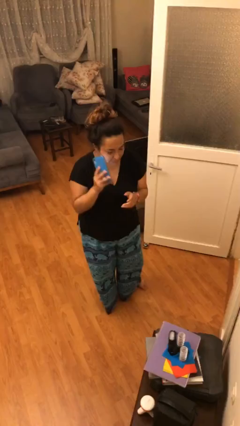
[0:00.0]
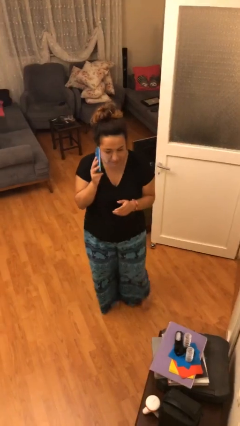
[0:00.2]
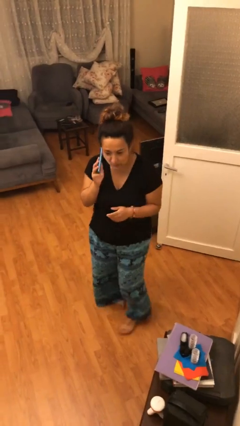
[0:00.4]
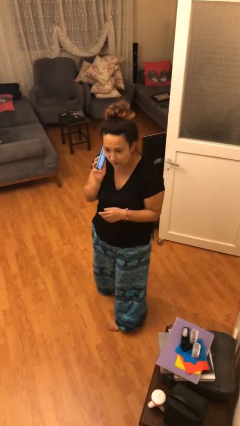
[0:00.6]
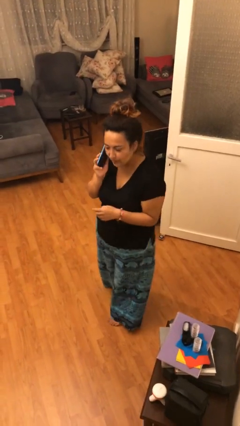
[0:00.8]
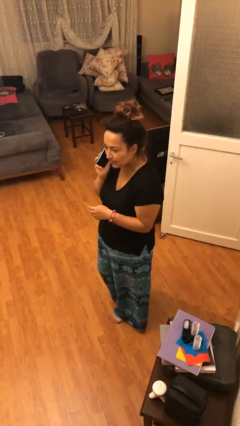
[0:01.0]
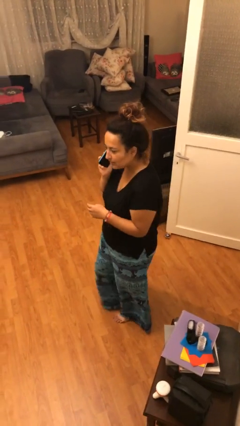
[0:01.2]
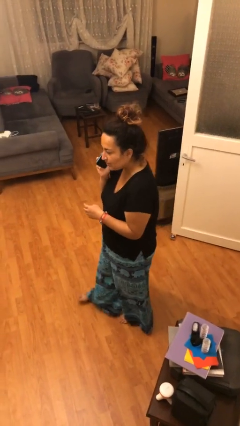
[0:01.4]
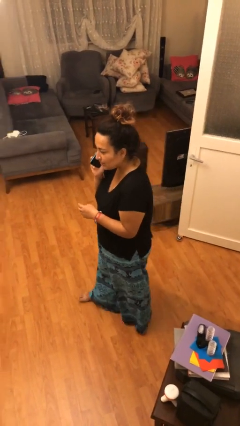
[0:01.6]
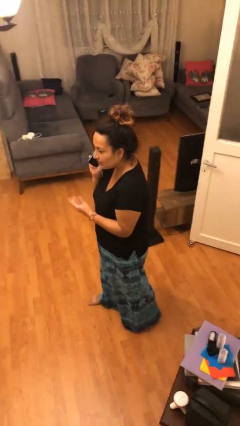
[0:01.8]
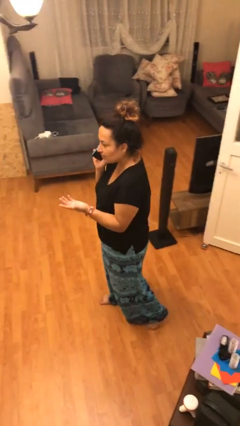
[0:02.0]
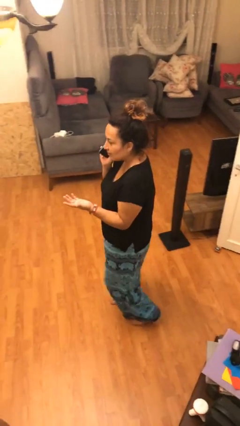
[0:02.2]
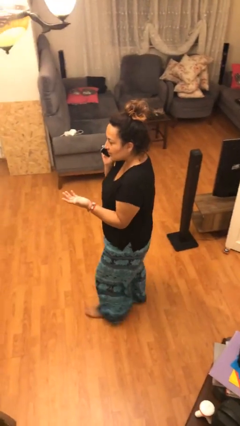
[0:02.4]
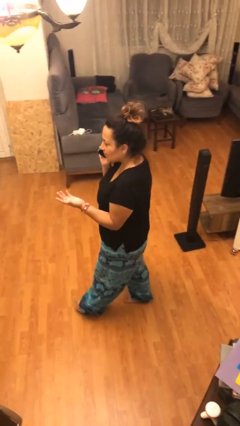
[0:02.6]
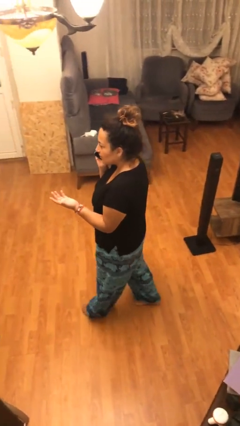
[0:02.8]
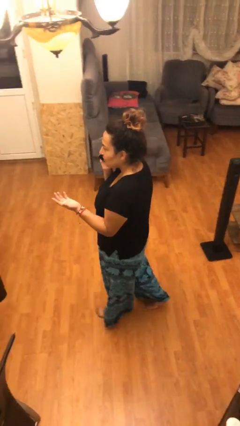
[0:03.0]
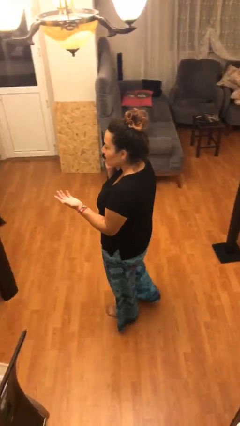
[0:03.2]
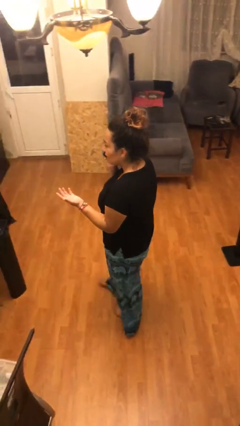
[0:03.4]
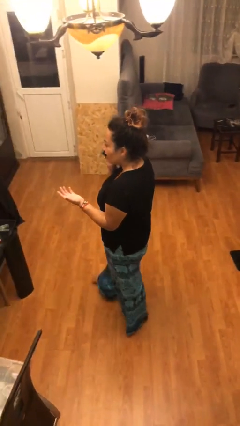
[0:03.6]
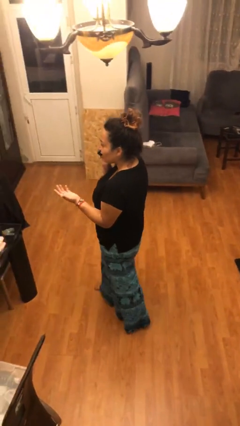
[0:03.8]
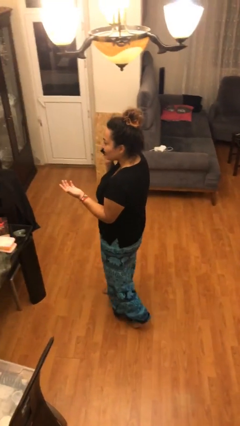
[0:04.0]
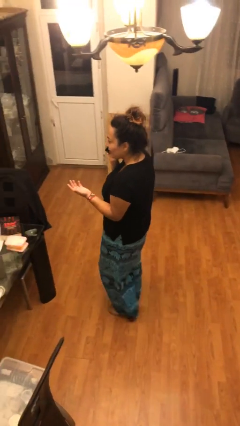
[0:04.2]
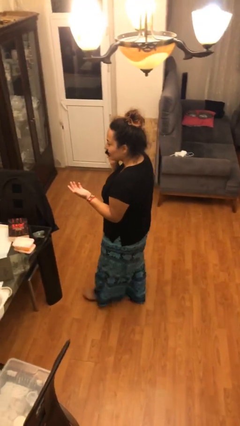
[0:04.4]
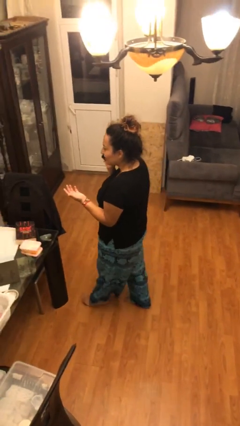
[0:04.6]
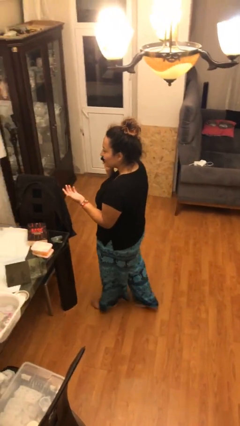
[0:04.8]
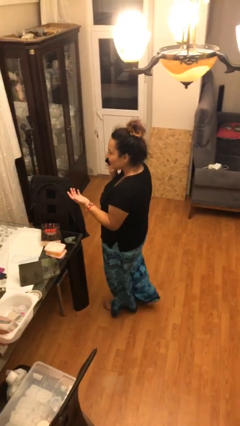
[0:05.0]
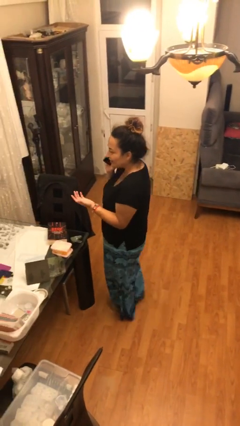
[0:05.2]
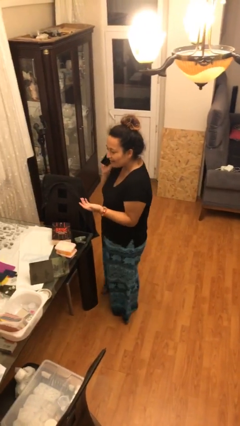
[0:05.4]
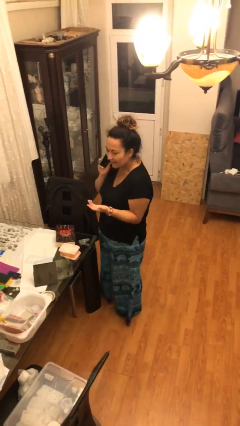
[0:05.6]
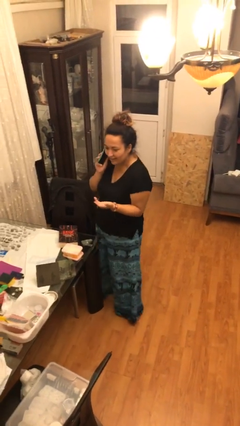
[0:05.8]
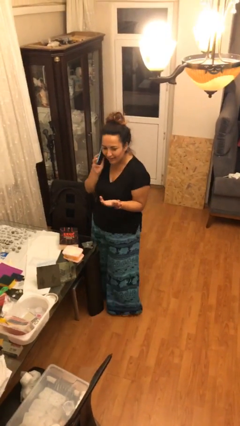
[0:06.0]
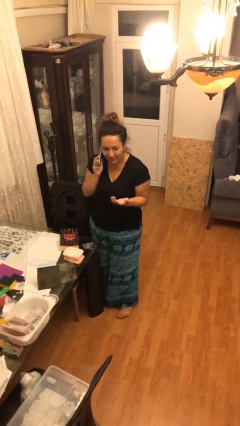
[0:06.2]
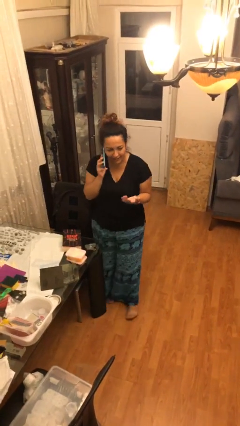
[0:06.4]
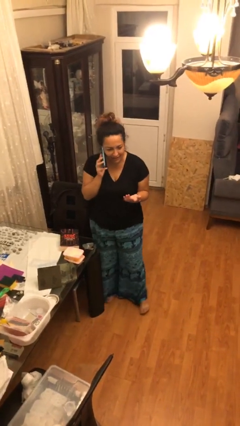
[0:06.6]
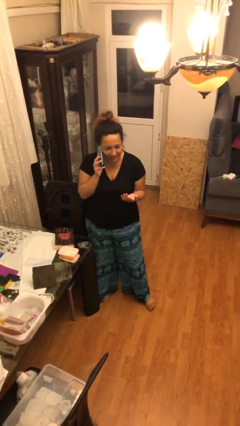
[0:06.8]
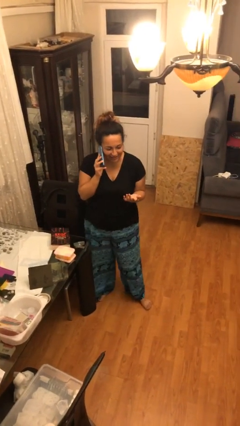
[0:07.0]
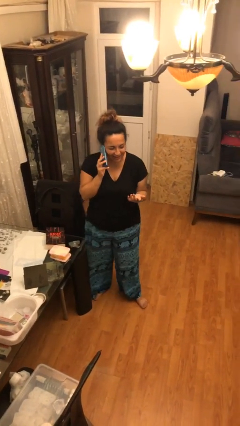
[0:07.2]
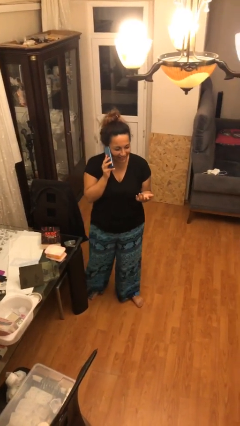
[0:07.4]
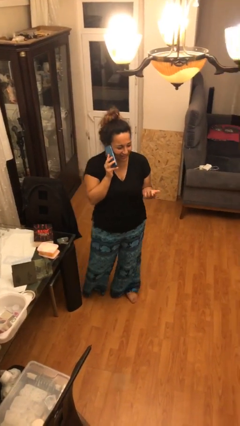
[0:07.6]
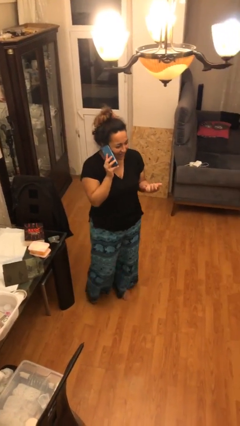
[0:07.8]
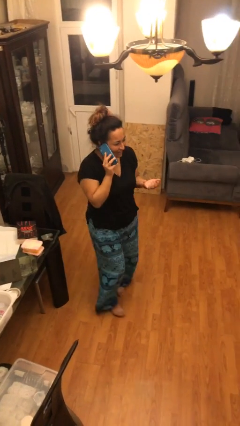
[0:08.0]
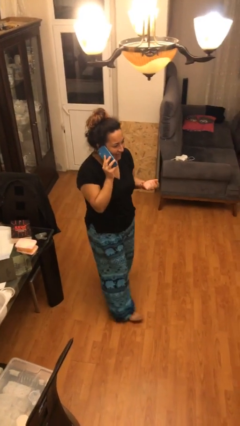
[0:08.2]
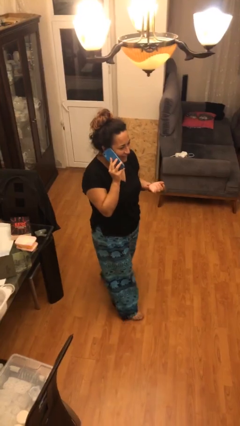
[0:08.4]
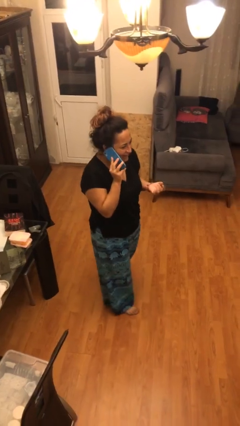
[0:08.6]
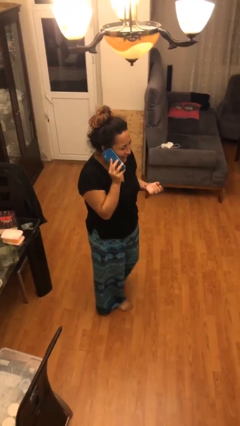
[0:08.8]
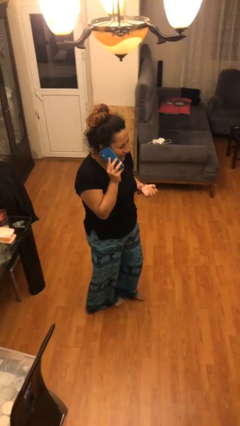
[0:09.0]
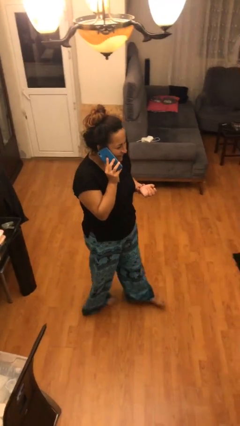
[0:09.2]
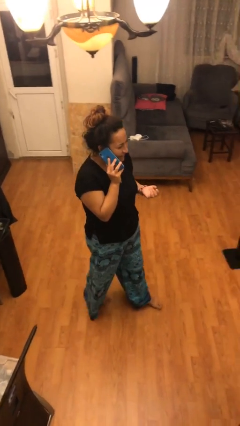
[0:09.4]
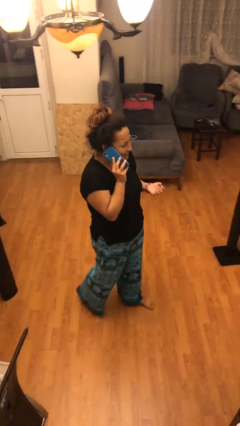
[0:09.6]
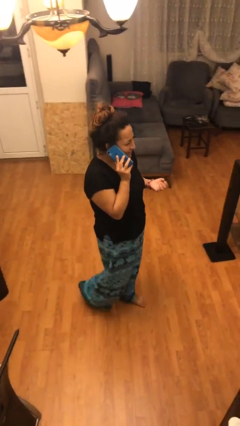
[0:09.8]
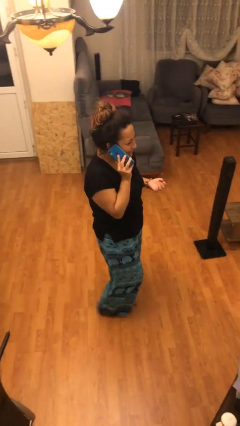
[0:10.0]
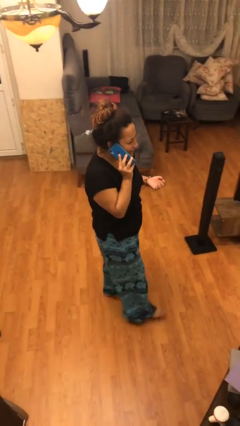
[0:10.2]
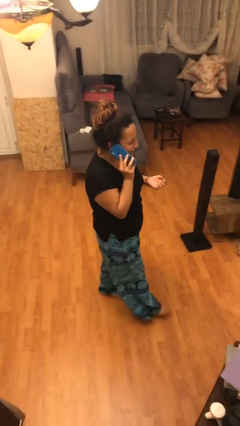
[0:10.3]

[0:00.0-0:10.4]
person talks on phone

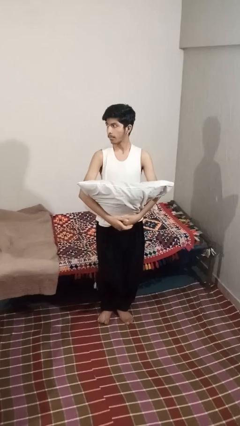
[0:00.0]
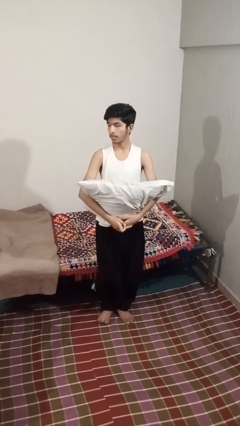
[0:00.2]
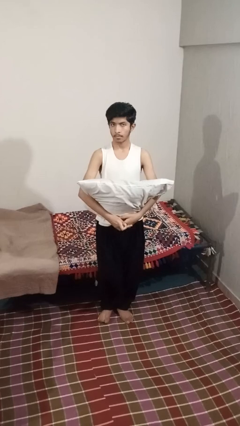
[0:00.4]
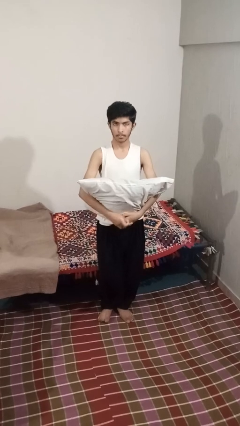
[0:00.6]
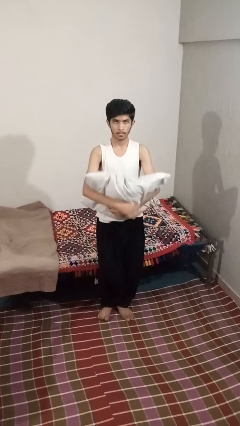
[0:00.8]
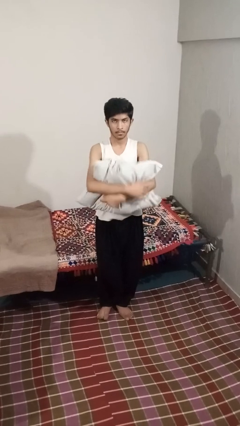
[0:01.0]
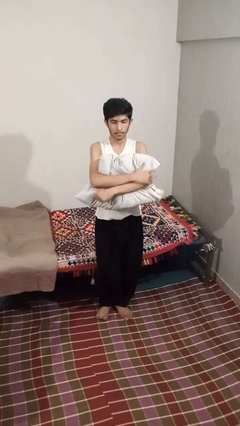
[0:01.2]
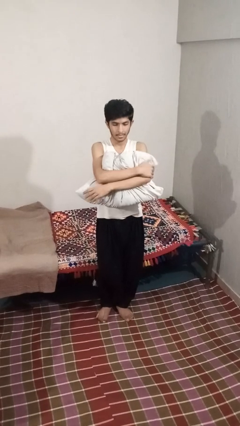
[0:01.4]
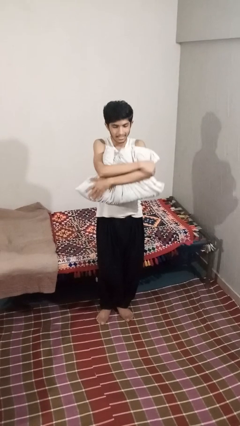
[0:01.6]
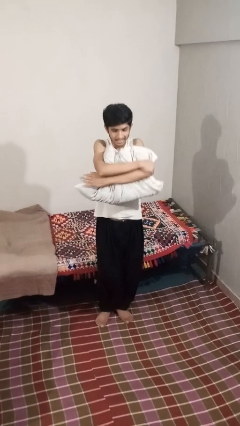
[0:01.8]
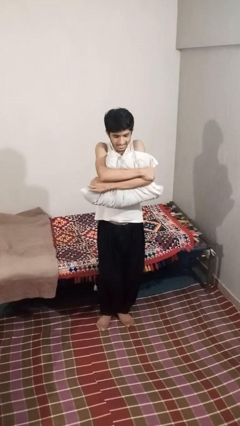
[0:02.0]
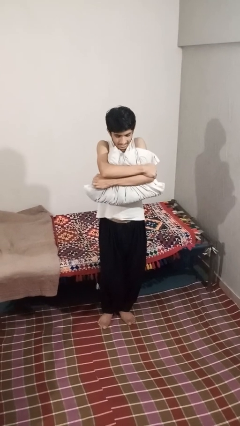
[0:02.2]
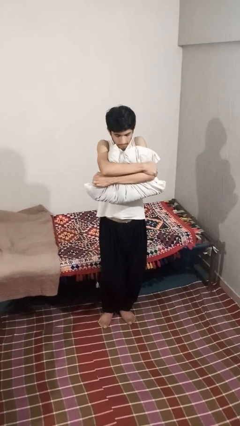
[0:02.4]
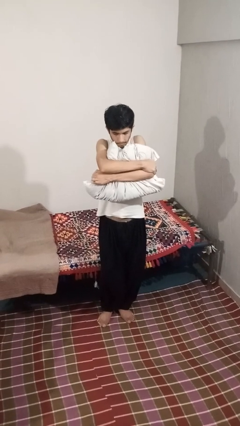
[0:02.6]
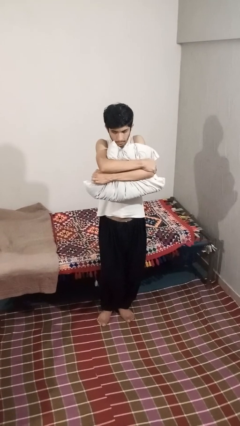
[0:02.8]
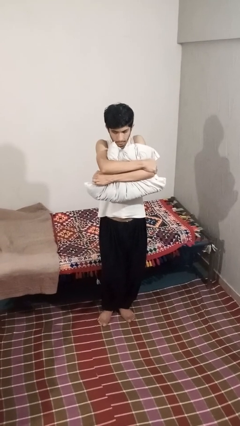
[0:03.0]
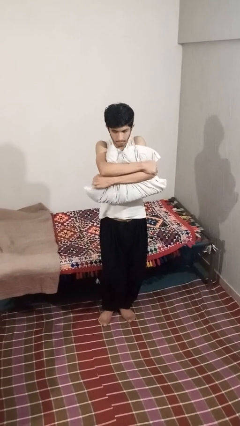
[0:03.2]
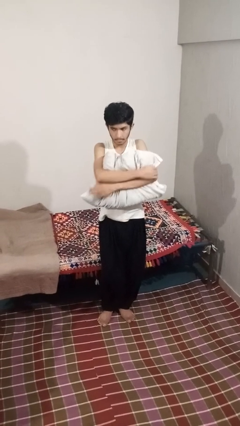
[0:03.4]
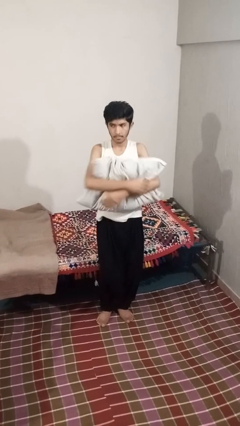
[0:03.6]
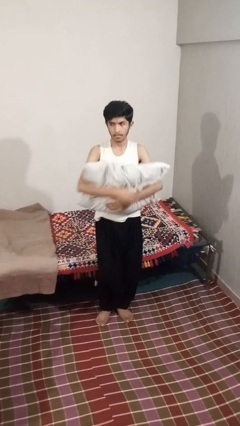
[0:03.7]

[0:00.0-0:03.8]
person squeezes object

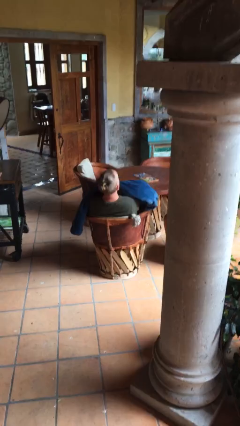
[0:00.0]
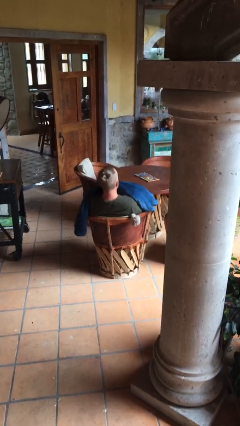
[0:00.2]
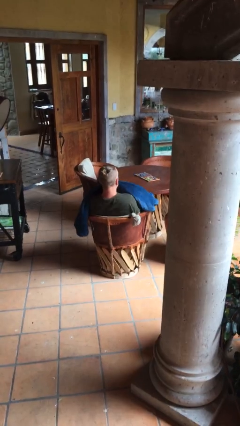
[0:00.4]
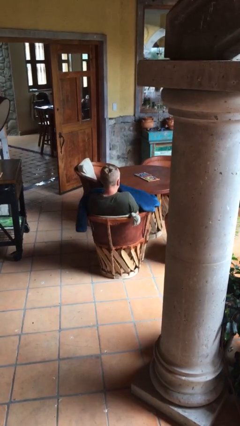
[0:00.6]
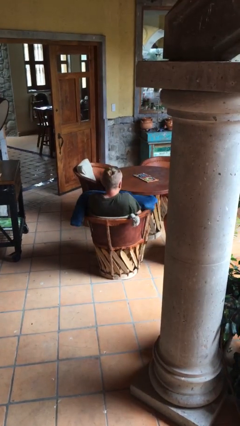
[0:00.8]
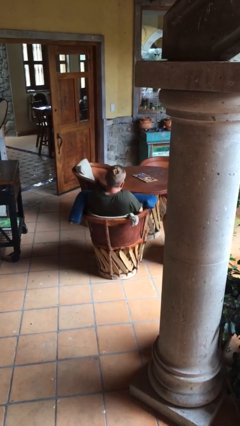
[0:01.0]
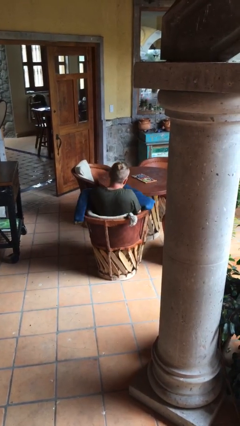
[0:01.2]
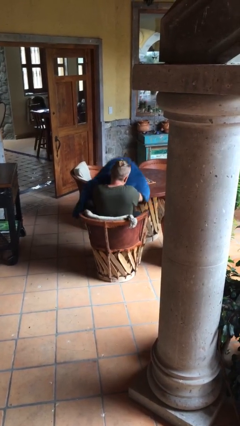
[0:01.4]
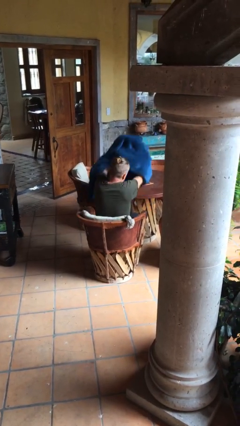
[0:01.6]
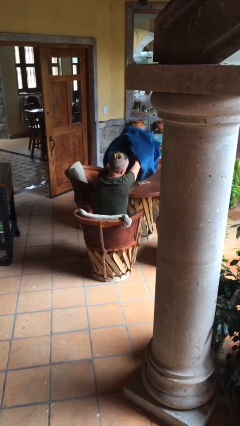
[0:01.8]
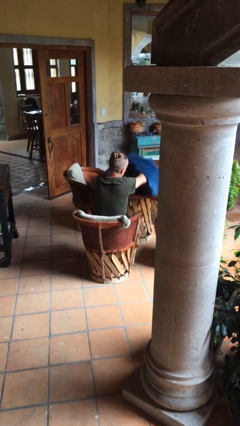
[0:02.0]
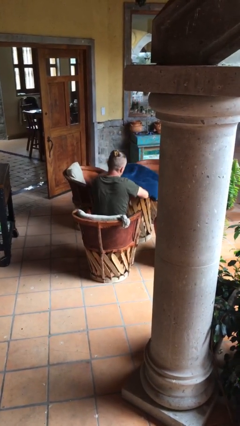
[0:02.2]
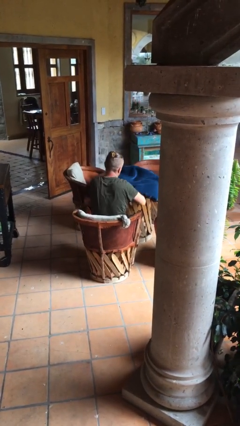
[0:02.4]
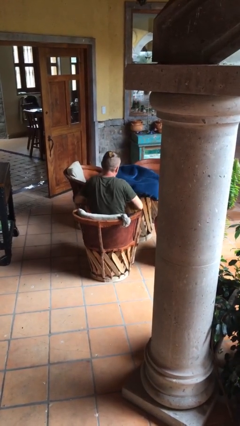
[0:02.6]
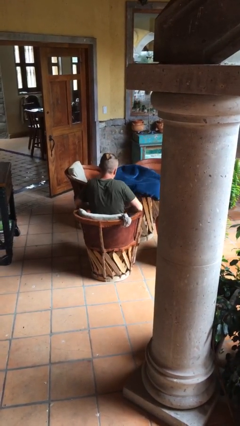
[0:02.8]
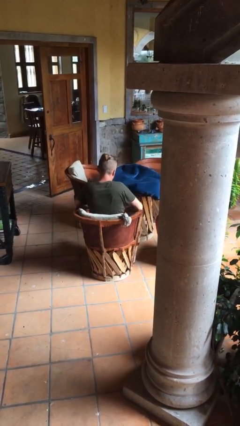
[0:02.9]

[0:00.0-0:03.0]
person uncovers with blanket

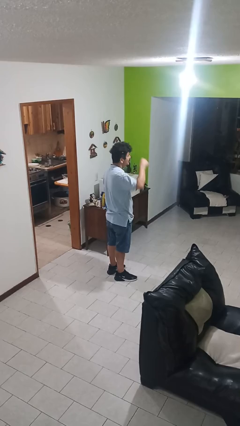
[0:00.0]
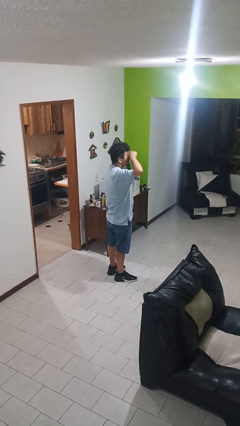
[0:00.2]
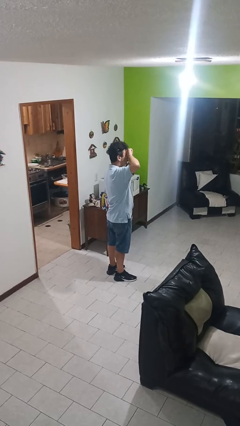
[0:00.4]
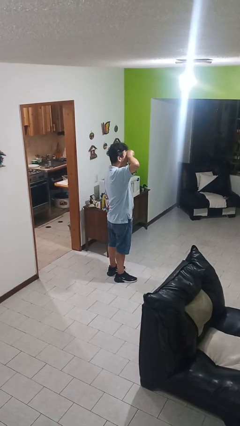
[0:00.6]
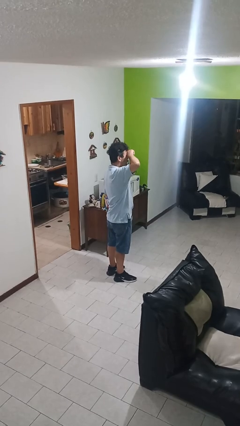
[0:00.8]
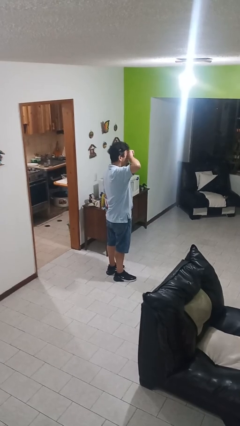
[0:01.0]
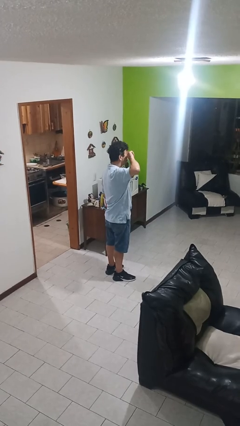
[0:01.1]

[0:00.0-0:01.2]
person rubs eyes
